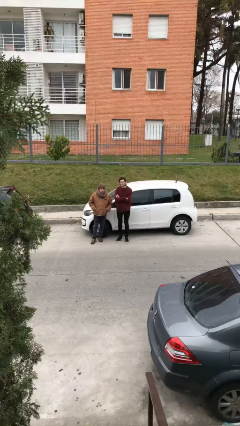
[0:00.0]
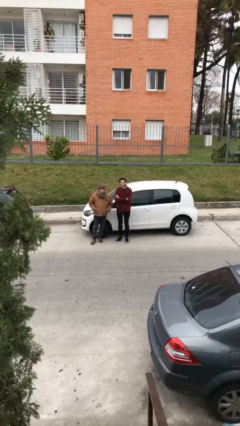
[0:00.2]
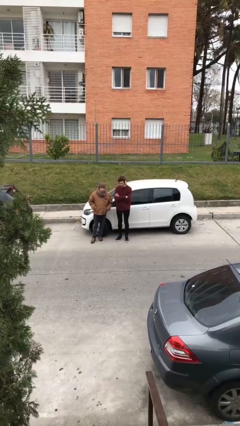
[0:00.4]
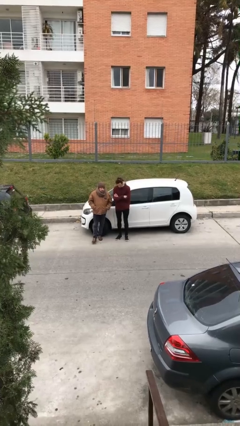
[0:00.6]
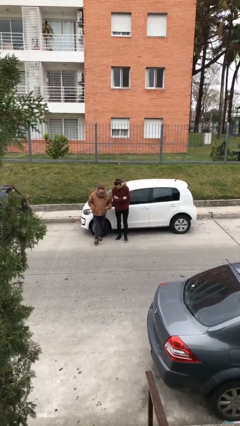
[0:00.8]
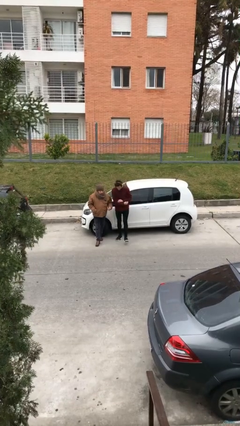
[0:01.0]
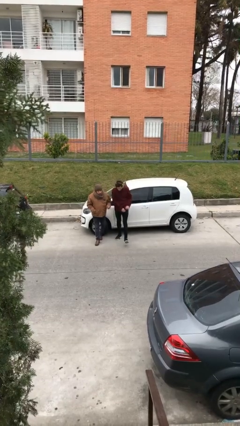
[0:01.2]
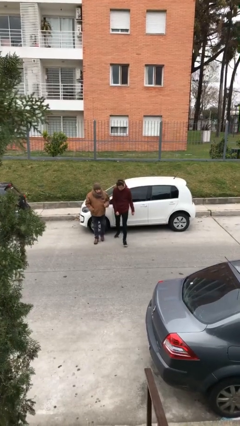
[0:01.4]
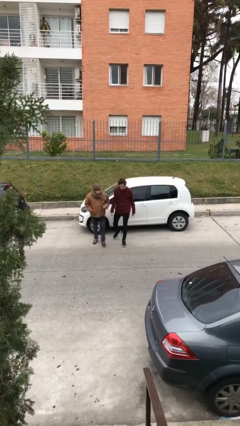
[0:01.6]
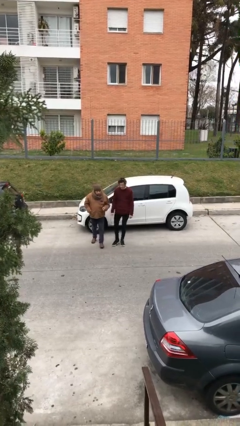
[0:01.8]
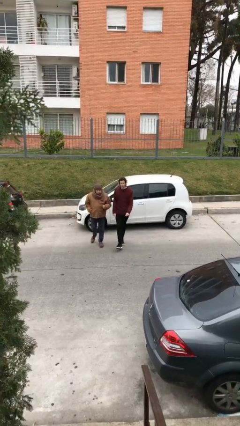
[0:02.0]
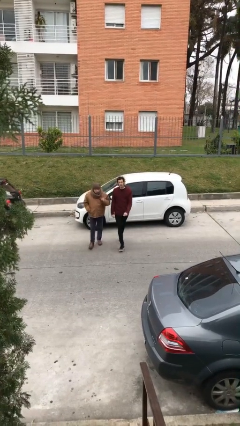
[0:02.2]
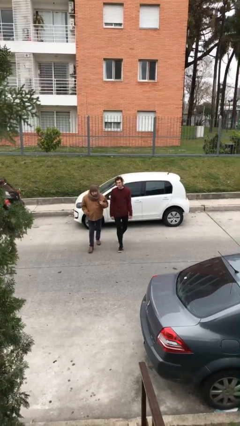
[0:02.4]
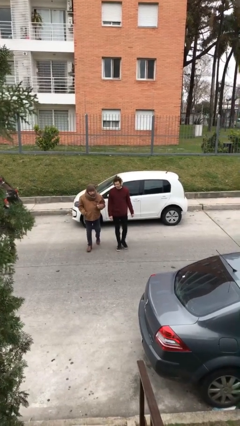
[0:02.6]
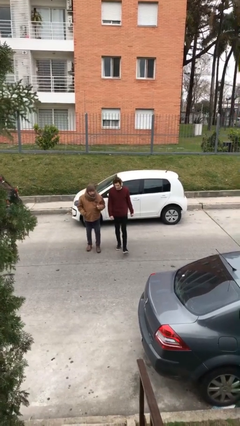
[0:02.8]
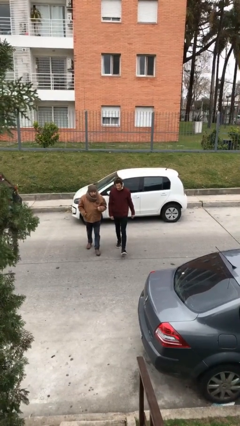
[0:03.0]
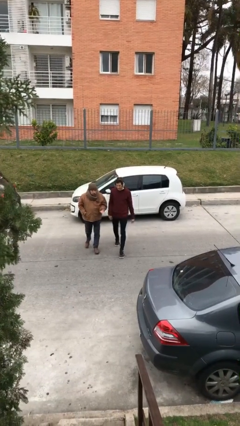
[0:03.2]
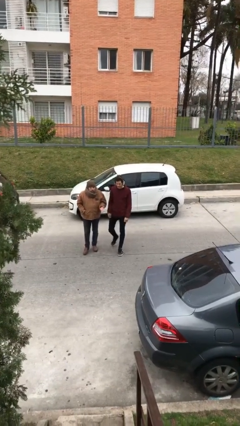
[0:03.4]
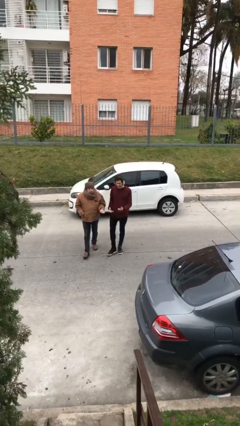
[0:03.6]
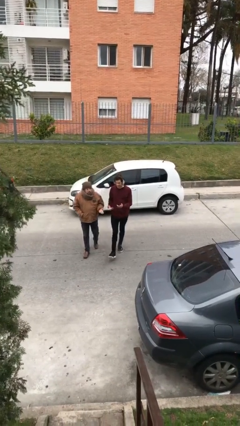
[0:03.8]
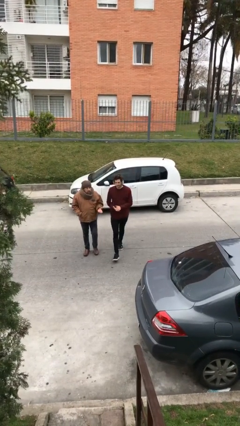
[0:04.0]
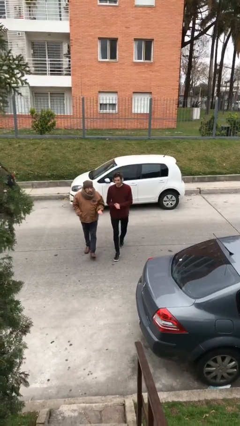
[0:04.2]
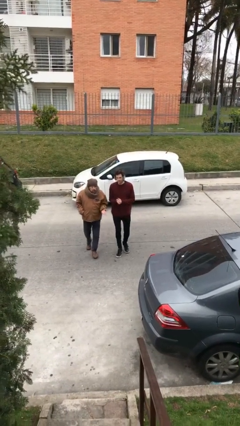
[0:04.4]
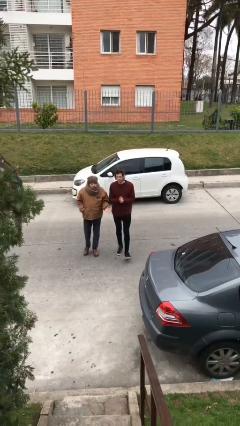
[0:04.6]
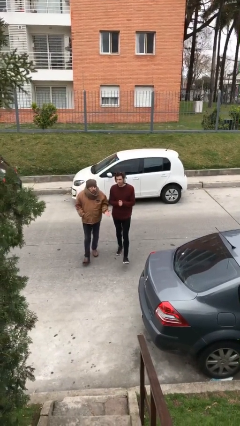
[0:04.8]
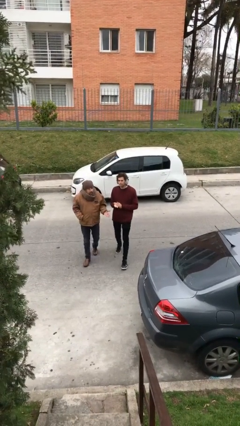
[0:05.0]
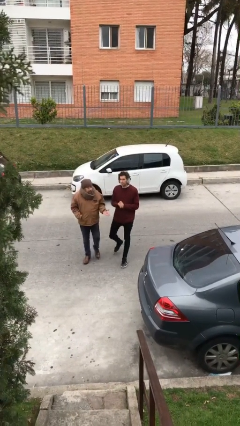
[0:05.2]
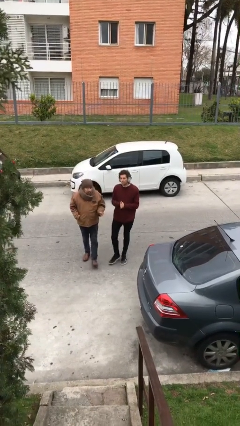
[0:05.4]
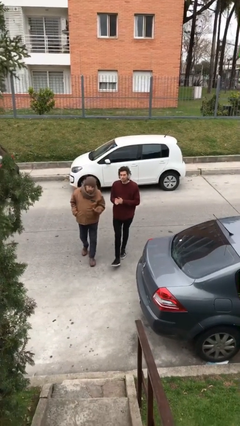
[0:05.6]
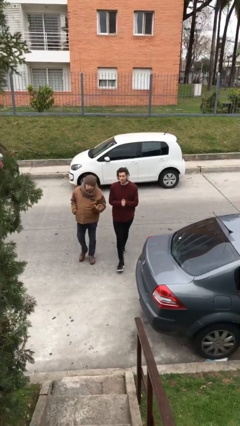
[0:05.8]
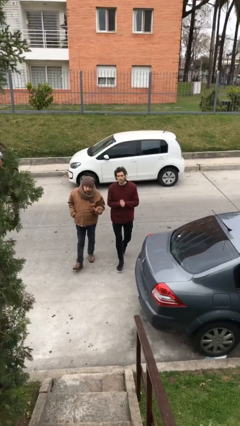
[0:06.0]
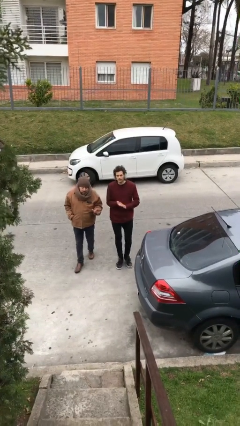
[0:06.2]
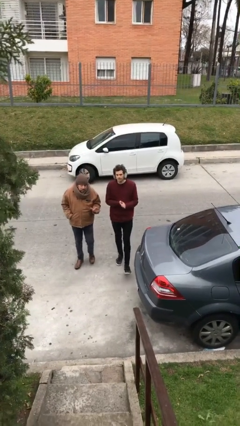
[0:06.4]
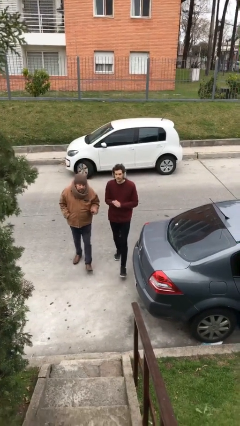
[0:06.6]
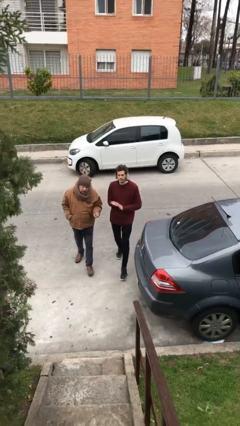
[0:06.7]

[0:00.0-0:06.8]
person talks to person

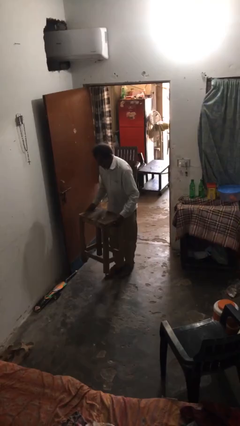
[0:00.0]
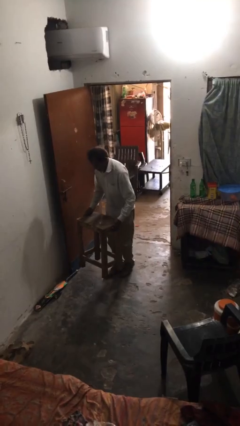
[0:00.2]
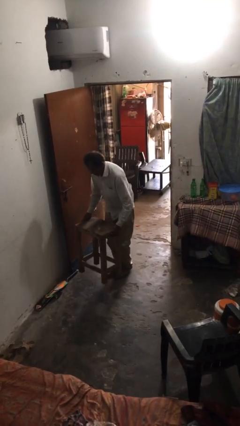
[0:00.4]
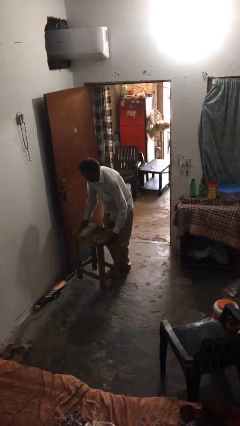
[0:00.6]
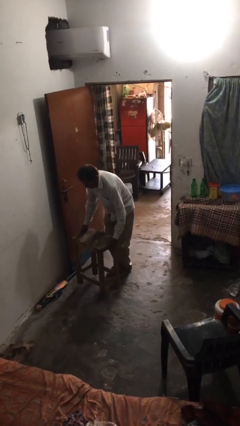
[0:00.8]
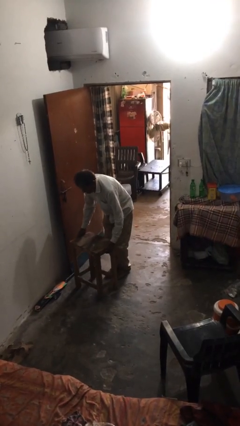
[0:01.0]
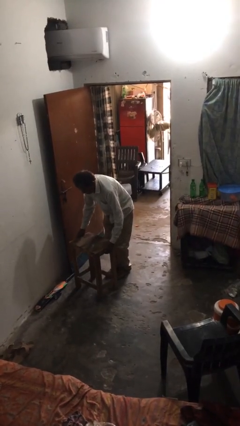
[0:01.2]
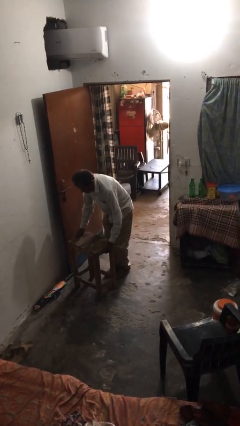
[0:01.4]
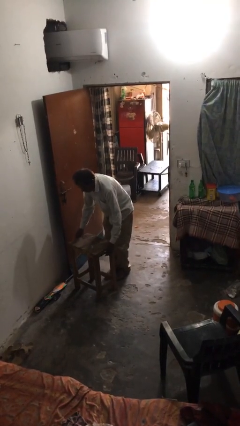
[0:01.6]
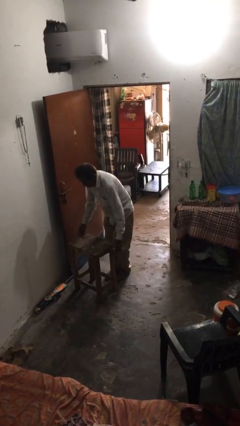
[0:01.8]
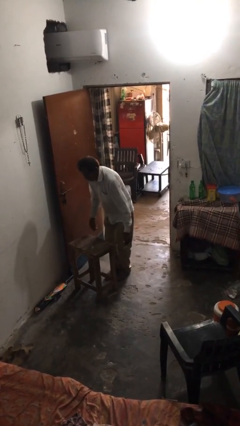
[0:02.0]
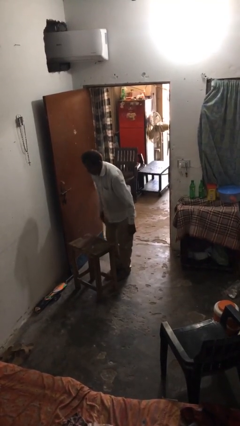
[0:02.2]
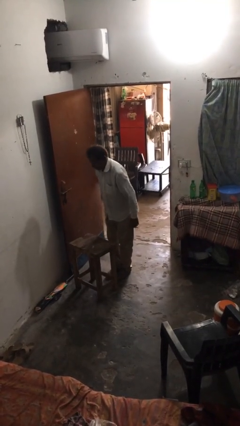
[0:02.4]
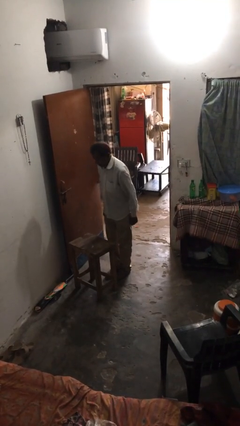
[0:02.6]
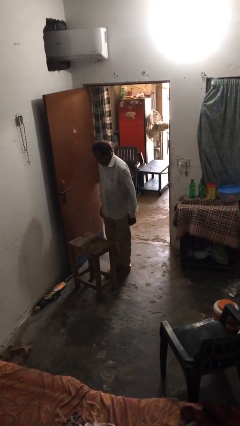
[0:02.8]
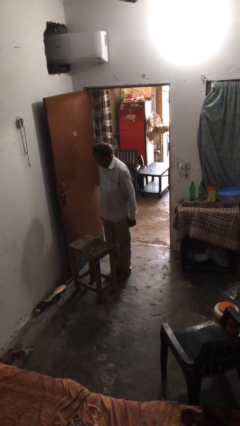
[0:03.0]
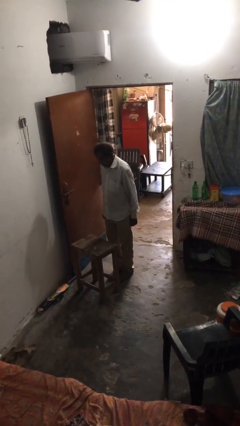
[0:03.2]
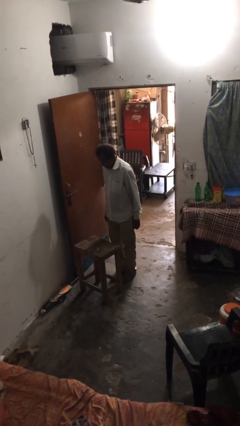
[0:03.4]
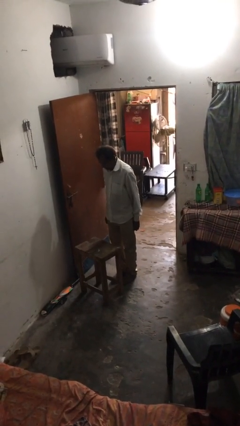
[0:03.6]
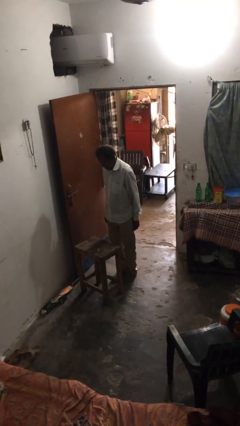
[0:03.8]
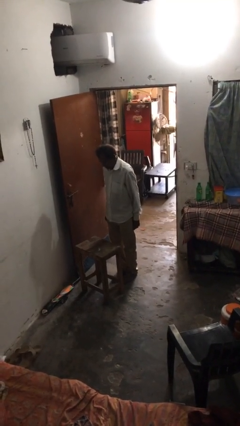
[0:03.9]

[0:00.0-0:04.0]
person puts down object on floor

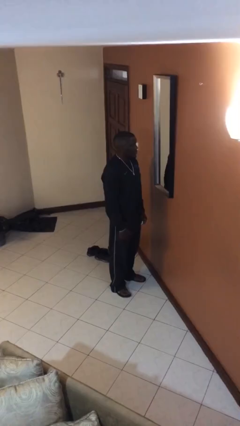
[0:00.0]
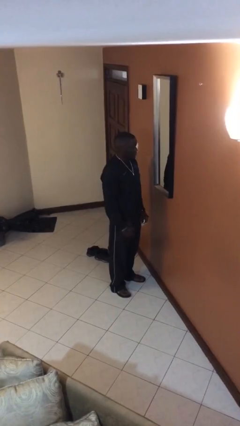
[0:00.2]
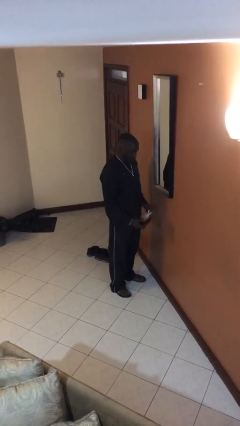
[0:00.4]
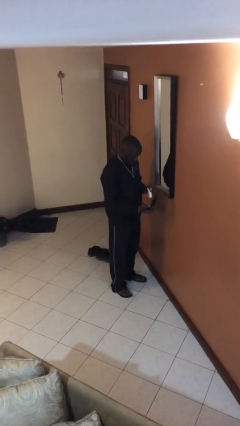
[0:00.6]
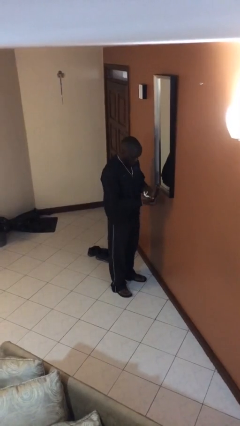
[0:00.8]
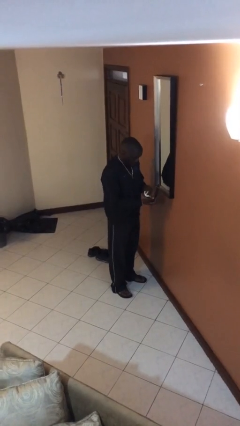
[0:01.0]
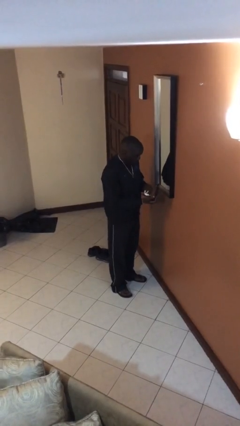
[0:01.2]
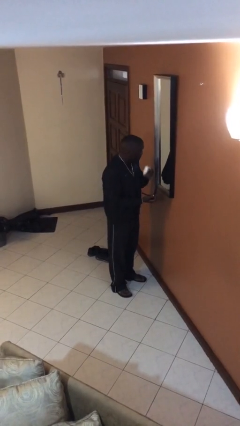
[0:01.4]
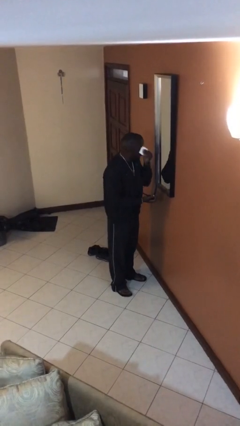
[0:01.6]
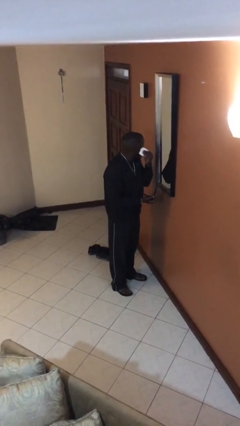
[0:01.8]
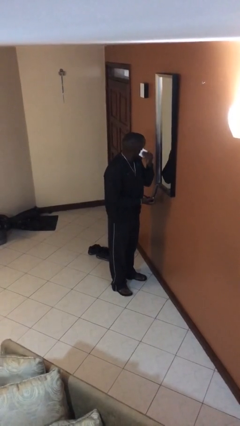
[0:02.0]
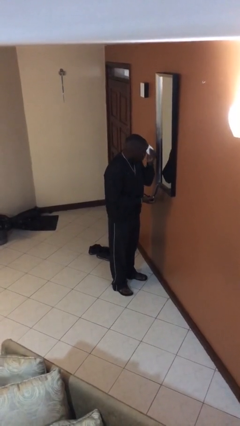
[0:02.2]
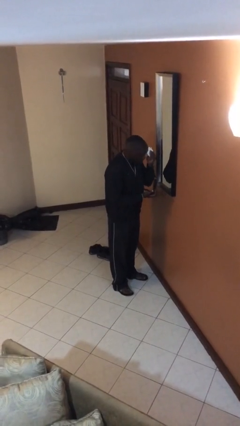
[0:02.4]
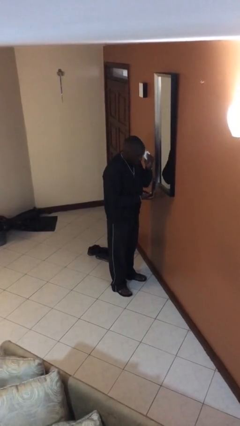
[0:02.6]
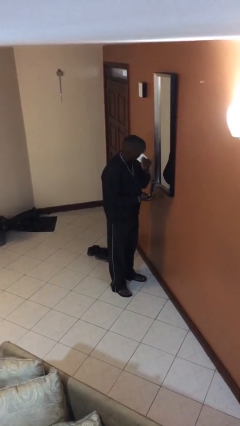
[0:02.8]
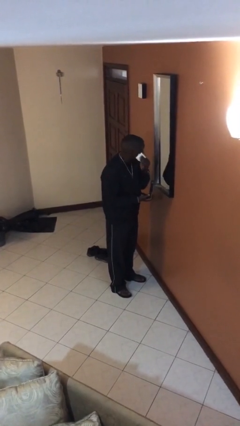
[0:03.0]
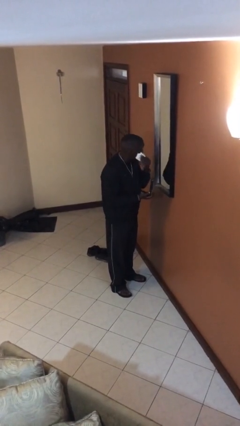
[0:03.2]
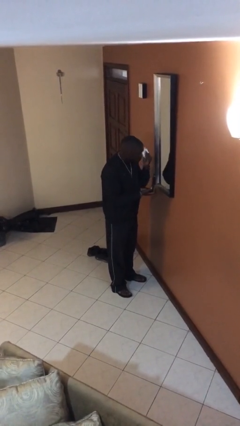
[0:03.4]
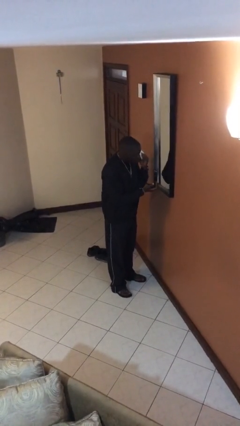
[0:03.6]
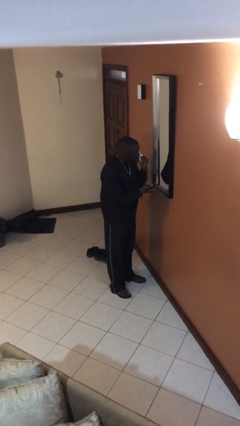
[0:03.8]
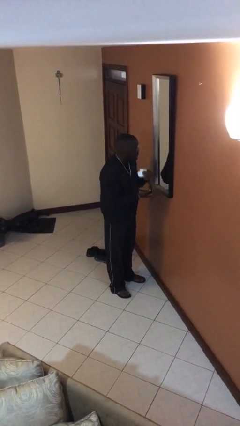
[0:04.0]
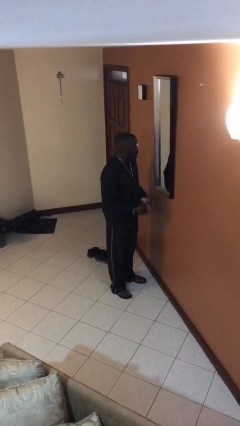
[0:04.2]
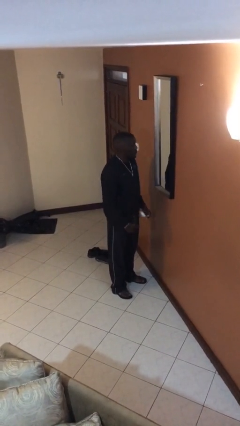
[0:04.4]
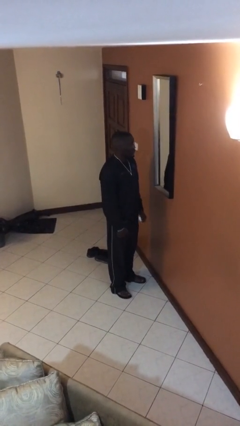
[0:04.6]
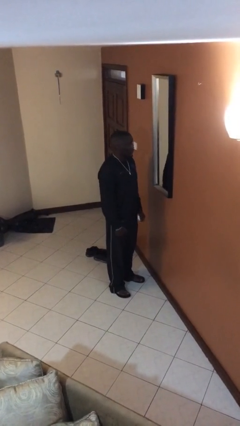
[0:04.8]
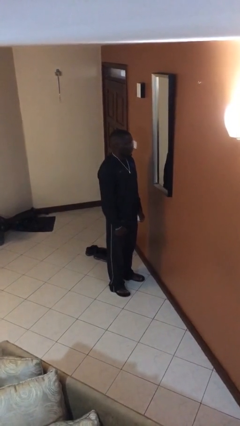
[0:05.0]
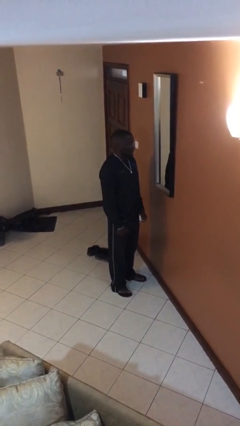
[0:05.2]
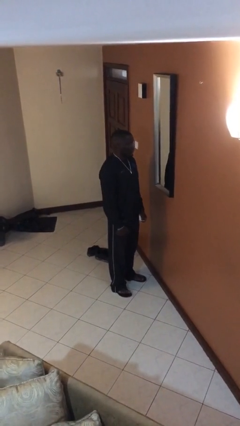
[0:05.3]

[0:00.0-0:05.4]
person applies foundation makeup

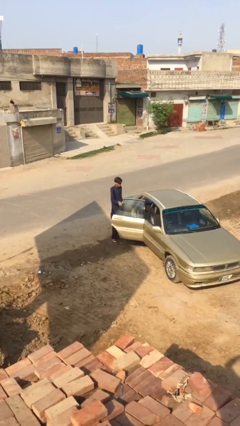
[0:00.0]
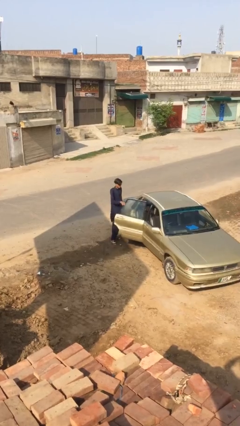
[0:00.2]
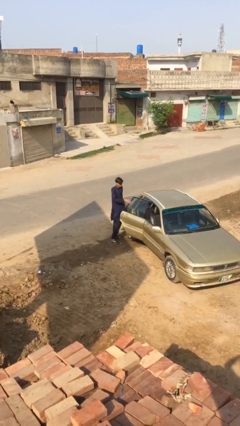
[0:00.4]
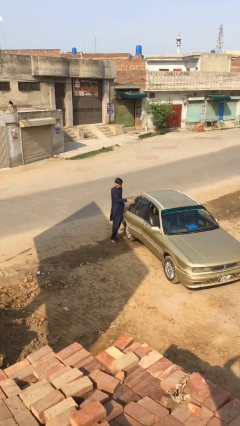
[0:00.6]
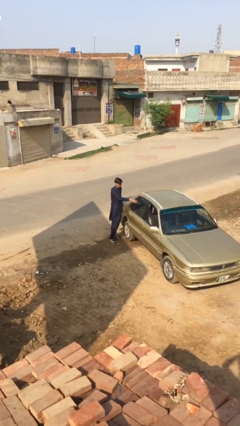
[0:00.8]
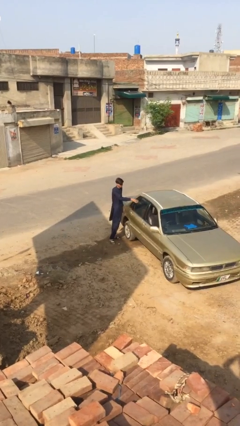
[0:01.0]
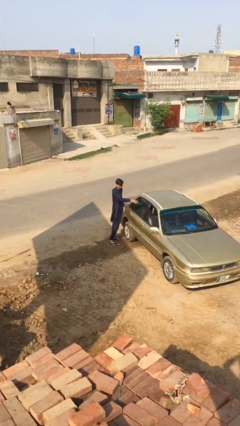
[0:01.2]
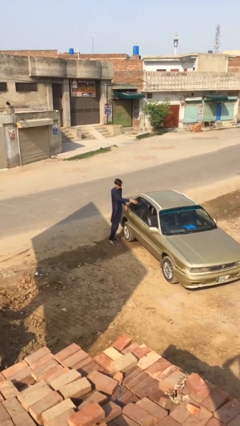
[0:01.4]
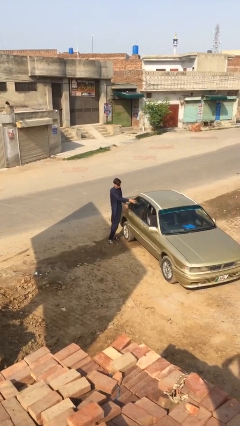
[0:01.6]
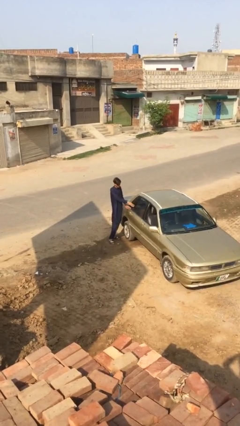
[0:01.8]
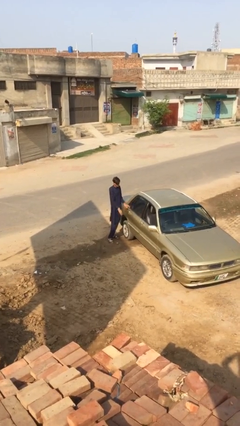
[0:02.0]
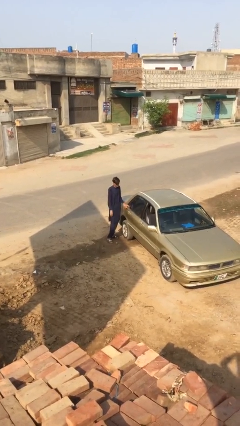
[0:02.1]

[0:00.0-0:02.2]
person closes car door
